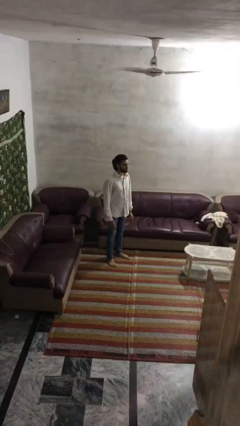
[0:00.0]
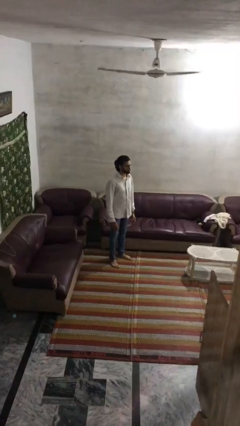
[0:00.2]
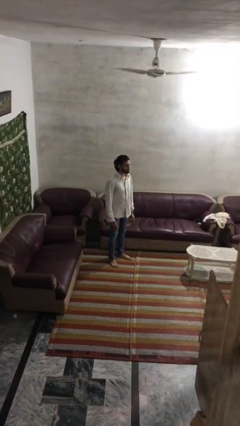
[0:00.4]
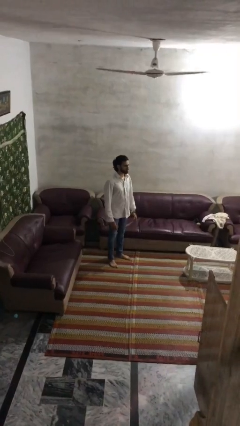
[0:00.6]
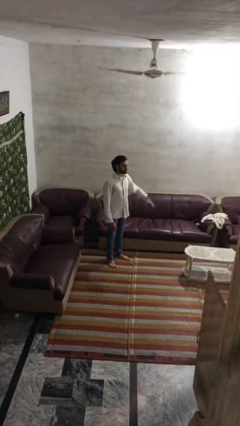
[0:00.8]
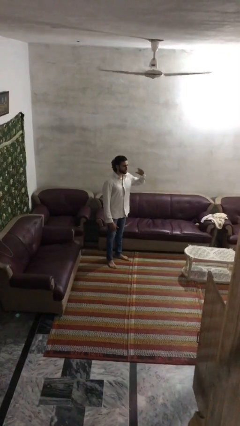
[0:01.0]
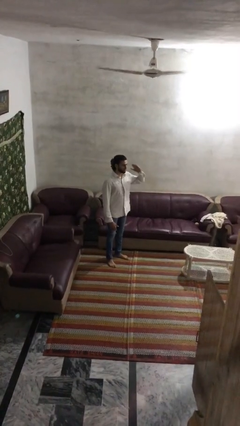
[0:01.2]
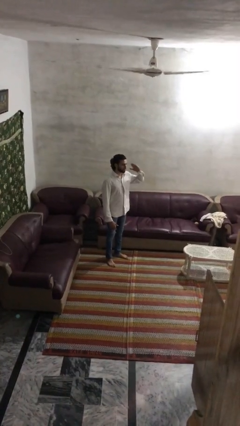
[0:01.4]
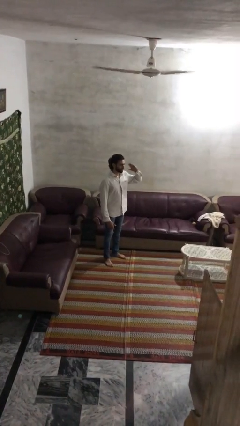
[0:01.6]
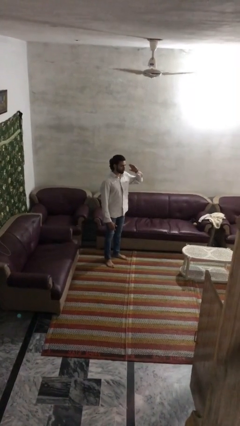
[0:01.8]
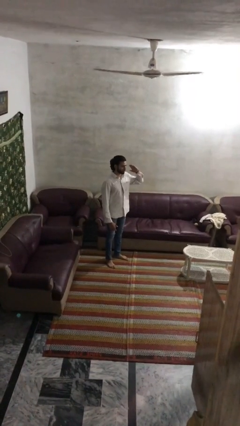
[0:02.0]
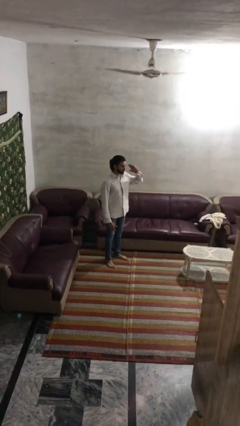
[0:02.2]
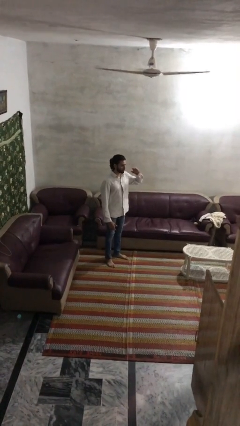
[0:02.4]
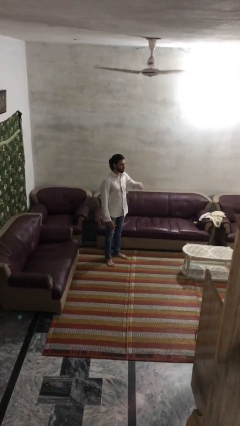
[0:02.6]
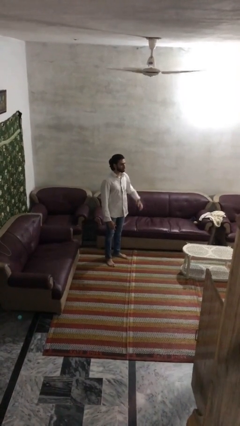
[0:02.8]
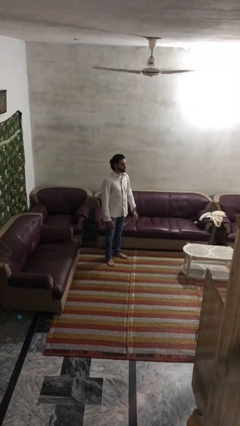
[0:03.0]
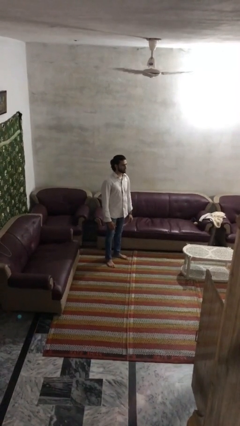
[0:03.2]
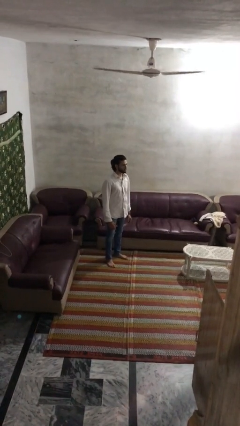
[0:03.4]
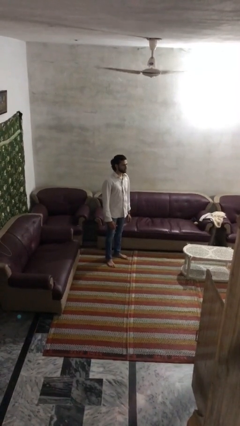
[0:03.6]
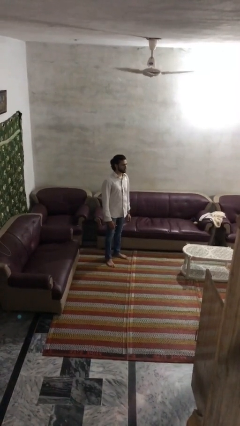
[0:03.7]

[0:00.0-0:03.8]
person salutes

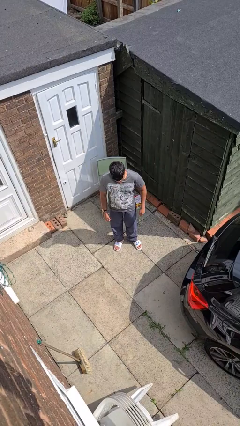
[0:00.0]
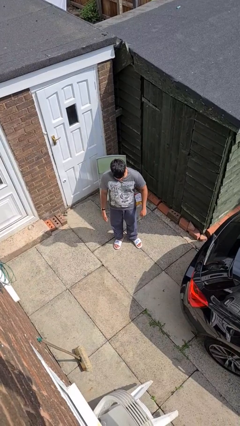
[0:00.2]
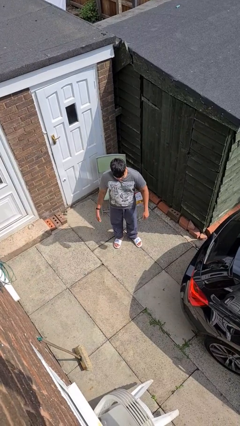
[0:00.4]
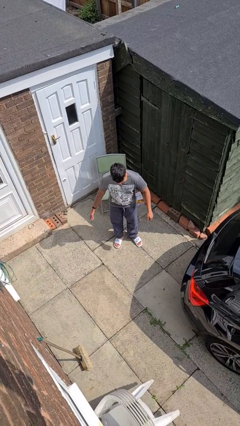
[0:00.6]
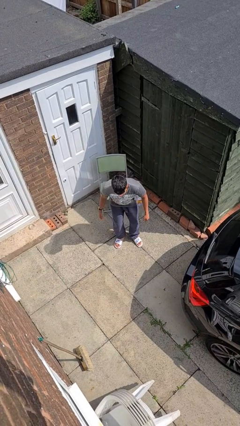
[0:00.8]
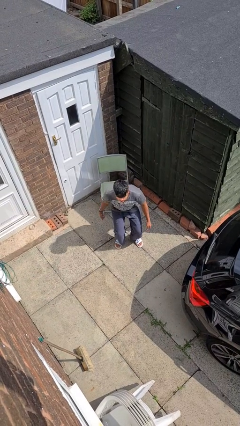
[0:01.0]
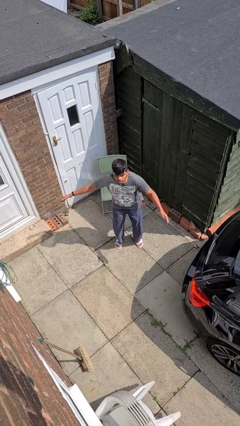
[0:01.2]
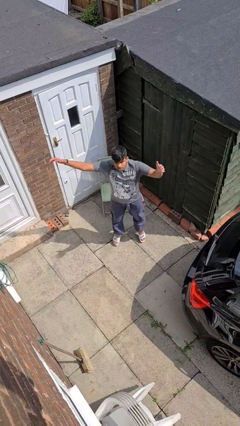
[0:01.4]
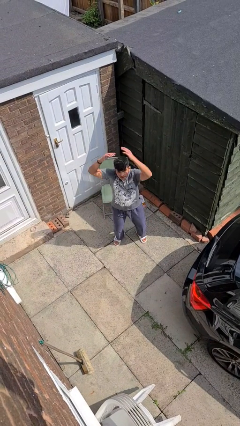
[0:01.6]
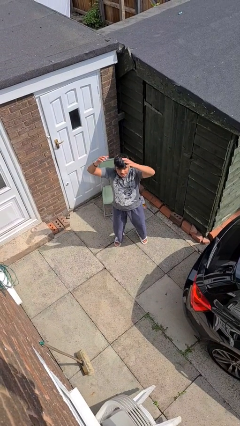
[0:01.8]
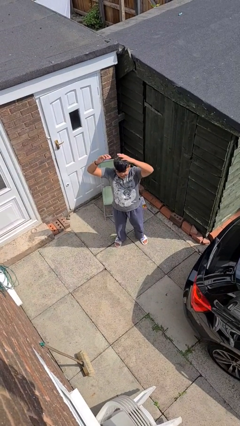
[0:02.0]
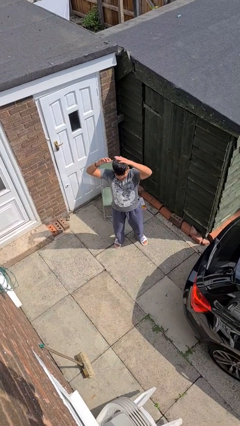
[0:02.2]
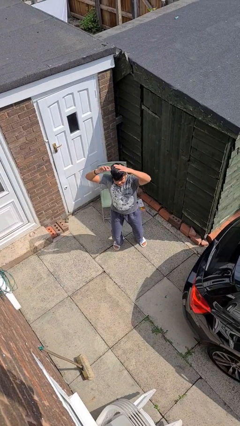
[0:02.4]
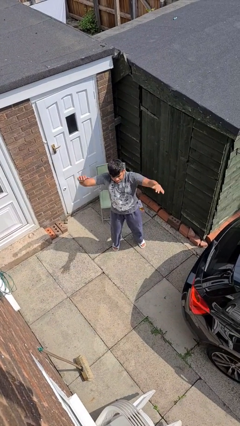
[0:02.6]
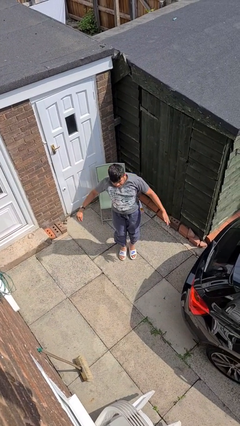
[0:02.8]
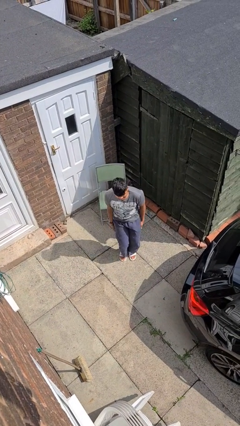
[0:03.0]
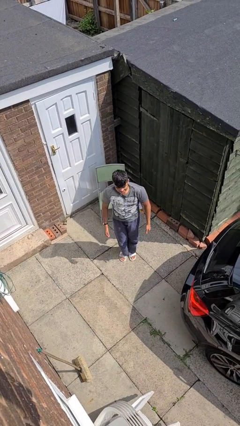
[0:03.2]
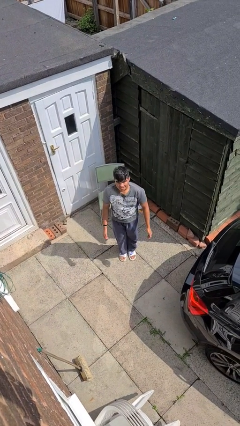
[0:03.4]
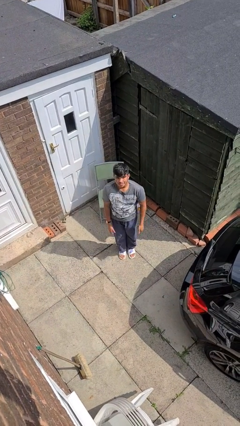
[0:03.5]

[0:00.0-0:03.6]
person exercises with jumping jacks

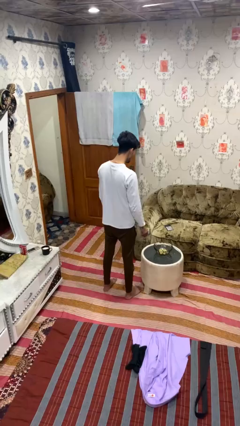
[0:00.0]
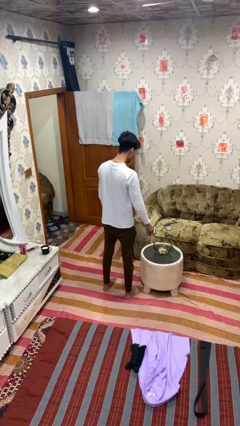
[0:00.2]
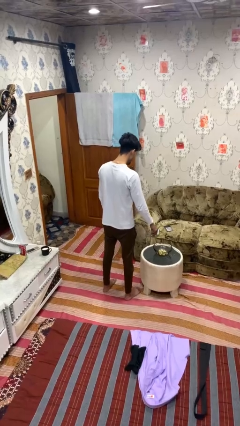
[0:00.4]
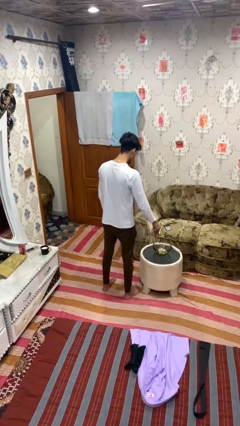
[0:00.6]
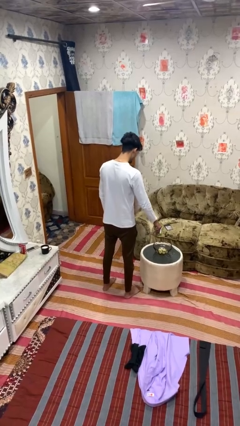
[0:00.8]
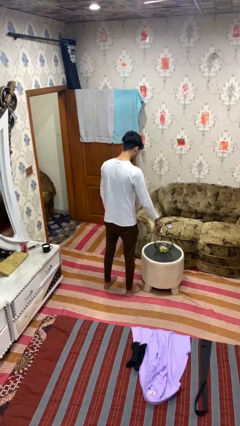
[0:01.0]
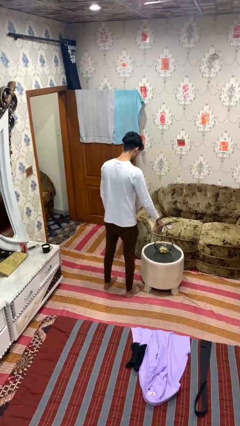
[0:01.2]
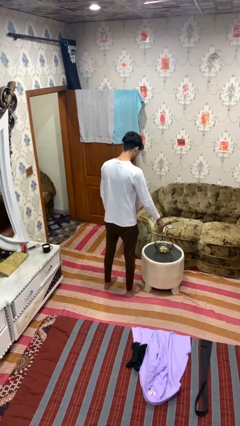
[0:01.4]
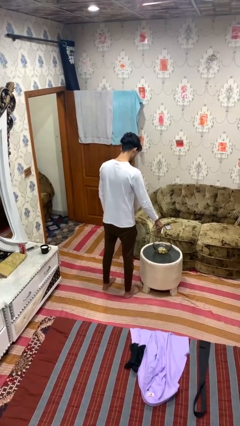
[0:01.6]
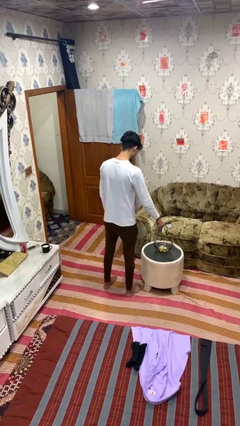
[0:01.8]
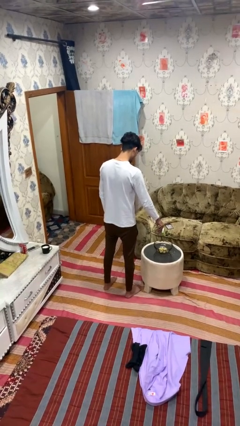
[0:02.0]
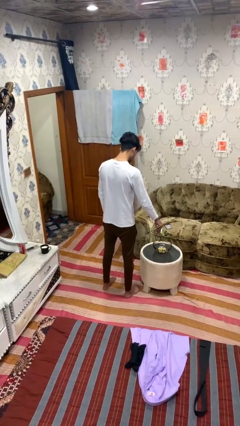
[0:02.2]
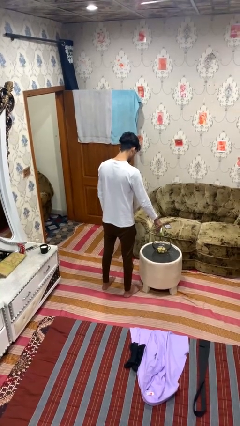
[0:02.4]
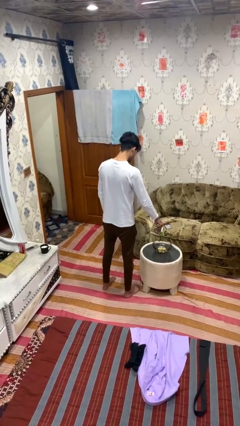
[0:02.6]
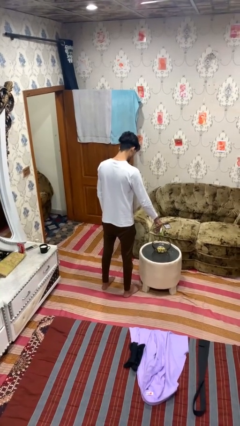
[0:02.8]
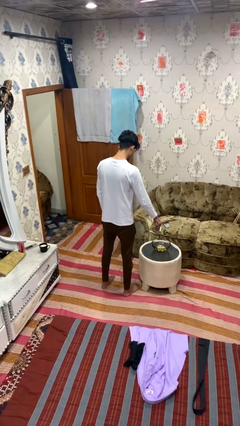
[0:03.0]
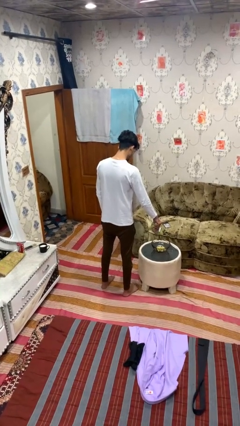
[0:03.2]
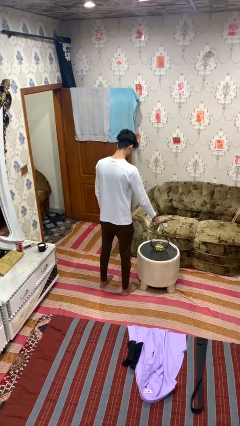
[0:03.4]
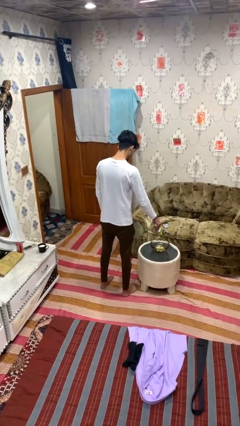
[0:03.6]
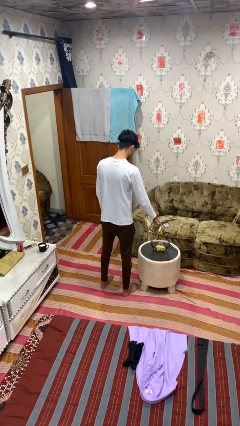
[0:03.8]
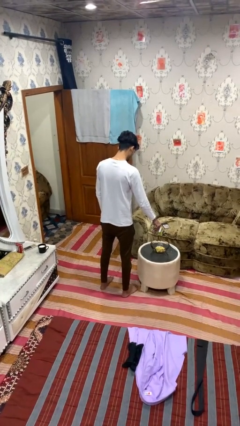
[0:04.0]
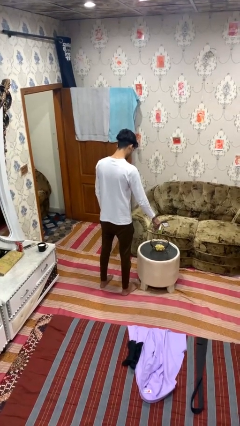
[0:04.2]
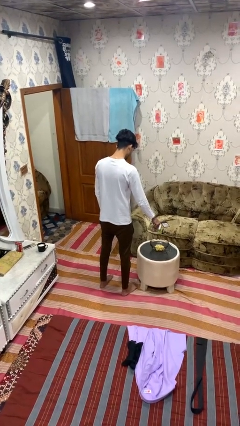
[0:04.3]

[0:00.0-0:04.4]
person pours into bowl

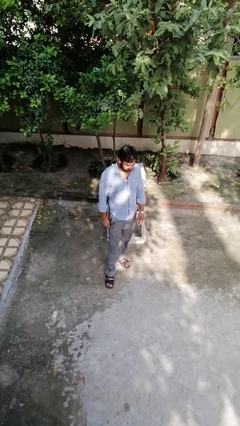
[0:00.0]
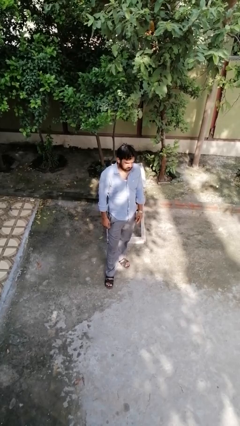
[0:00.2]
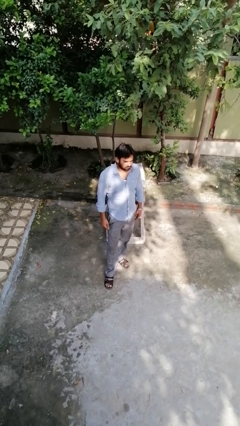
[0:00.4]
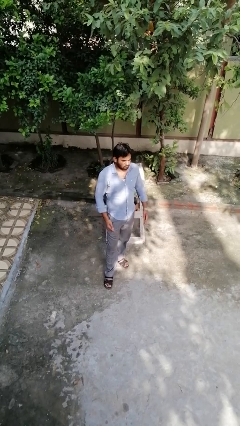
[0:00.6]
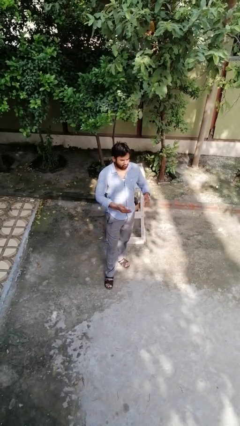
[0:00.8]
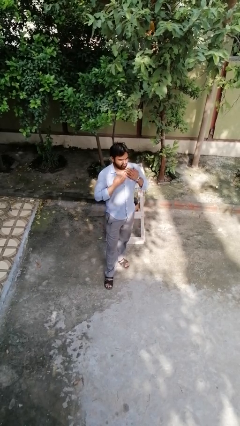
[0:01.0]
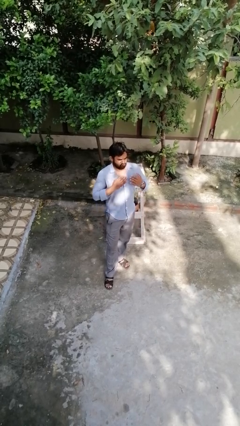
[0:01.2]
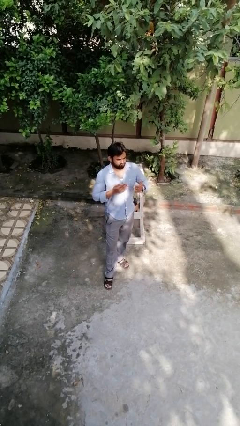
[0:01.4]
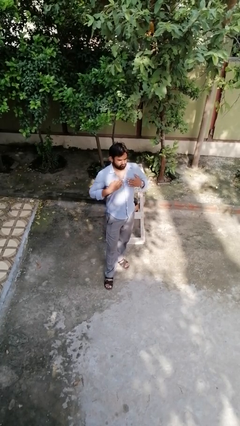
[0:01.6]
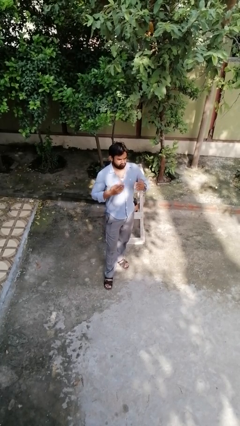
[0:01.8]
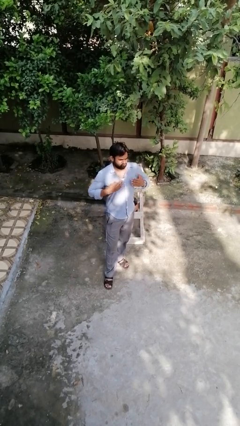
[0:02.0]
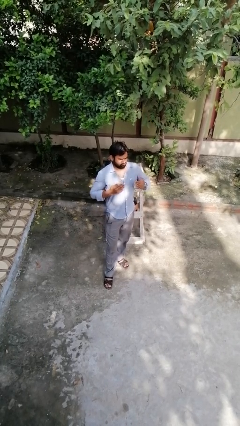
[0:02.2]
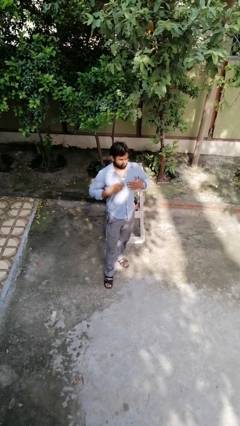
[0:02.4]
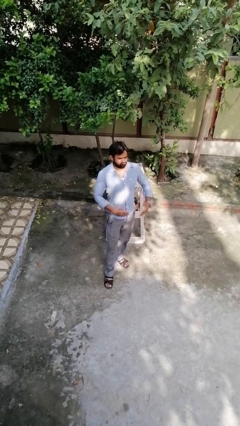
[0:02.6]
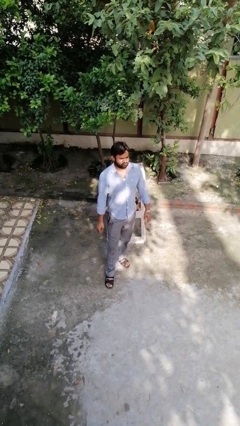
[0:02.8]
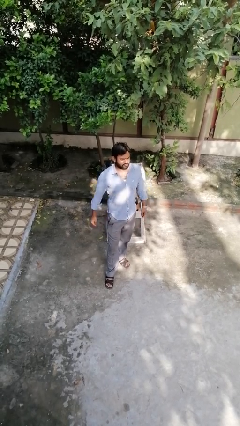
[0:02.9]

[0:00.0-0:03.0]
person drums on chest

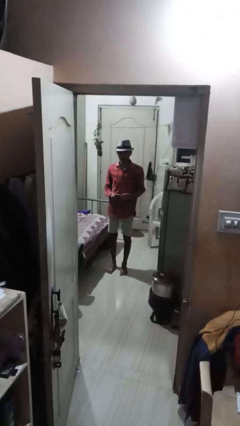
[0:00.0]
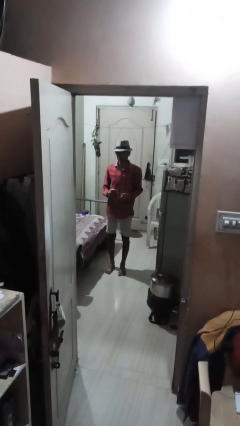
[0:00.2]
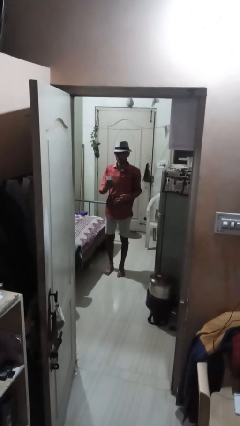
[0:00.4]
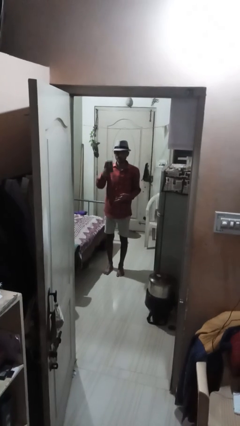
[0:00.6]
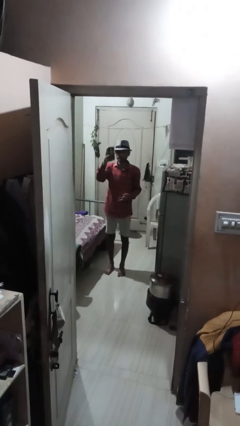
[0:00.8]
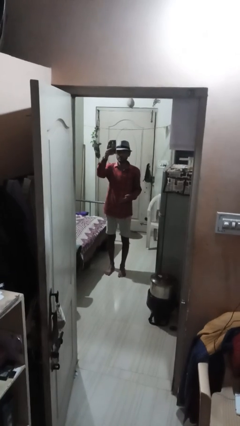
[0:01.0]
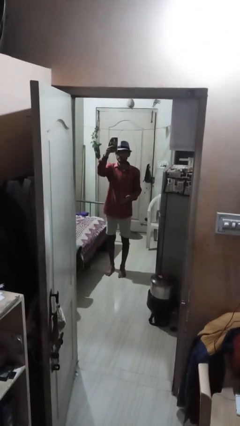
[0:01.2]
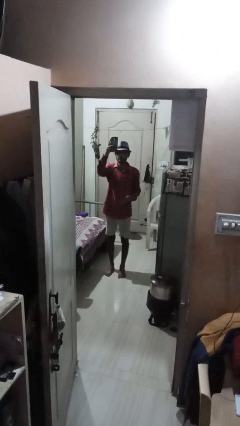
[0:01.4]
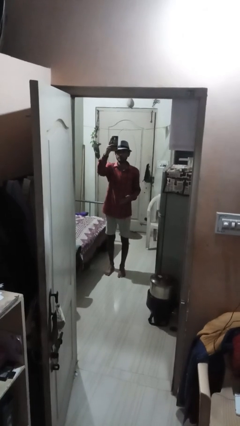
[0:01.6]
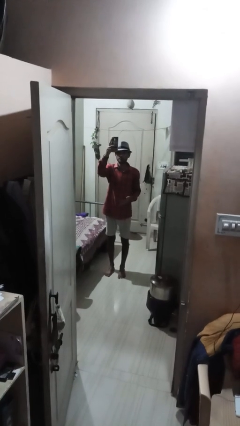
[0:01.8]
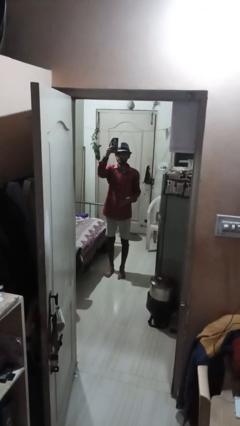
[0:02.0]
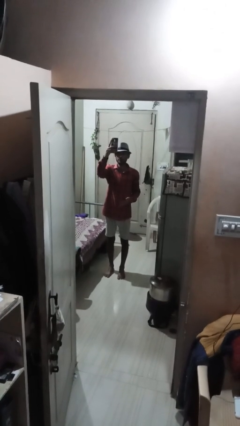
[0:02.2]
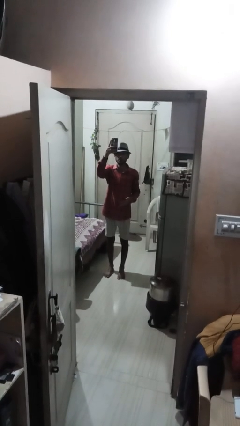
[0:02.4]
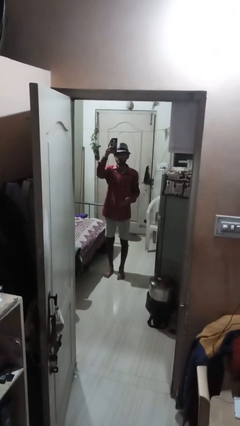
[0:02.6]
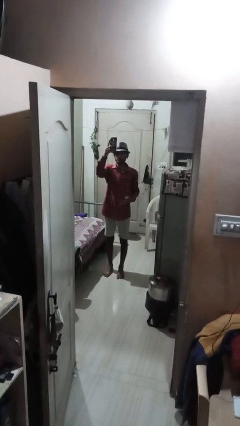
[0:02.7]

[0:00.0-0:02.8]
person takes selfie
